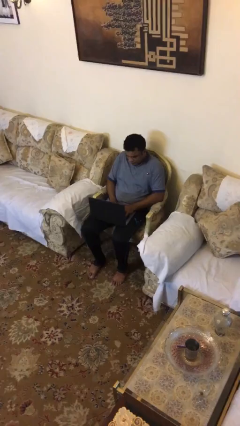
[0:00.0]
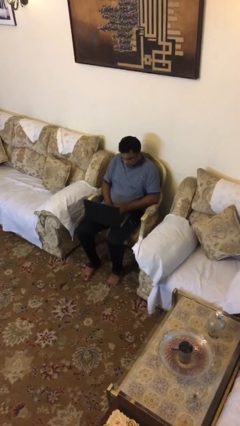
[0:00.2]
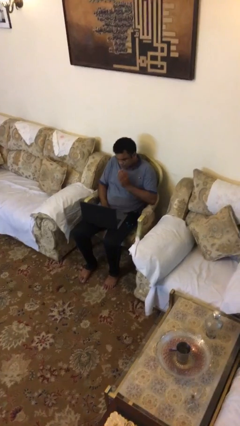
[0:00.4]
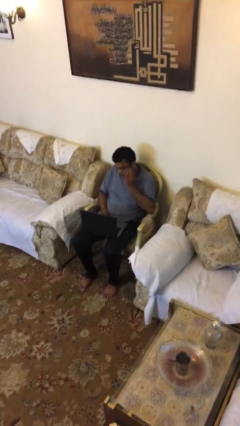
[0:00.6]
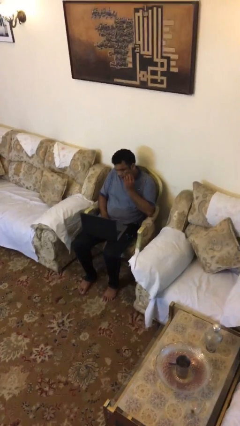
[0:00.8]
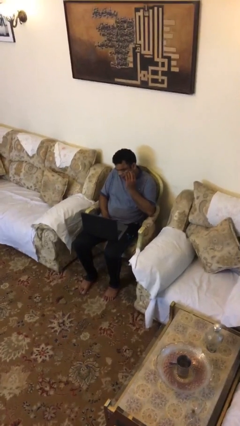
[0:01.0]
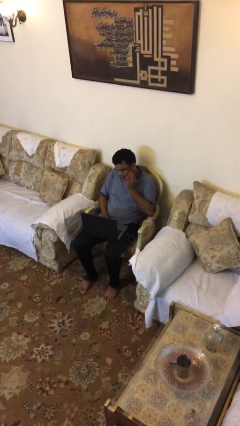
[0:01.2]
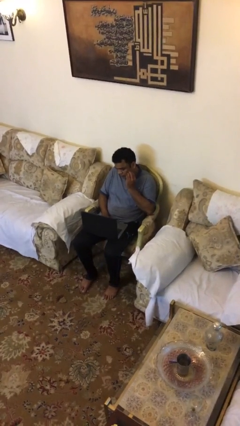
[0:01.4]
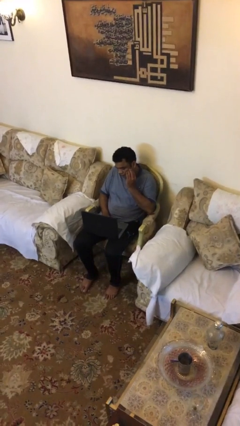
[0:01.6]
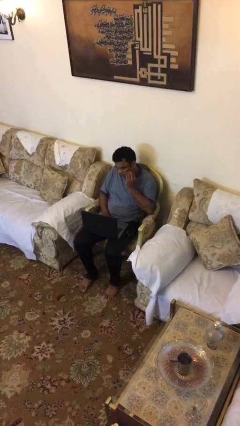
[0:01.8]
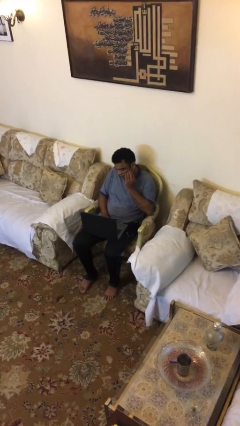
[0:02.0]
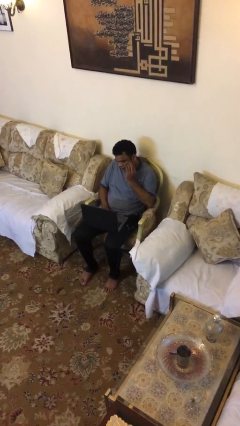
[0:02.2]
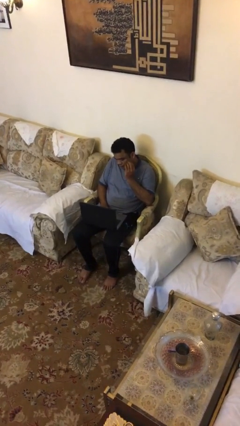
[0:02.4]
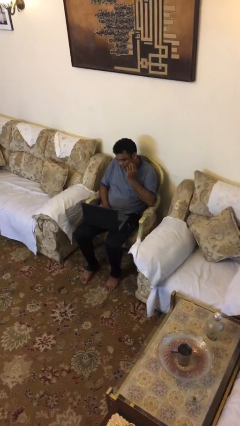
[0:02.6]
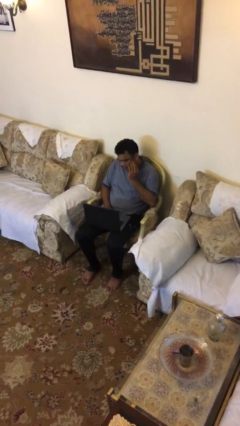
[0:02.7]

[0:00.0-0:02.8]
person interacts with laptop

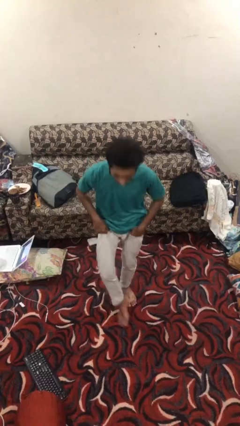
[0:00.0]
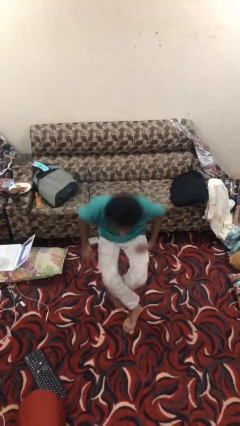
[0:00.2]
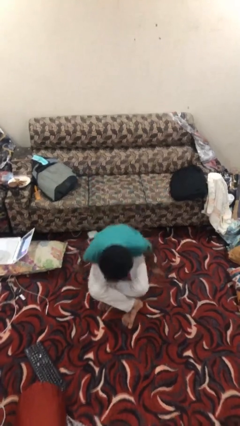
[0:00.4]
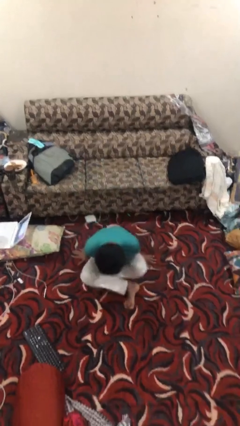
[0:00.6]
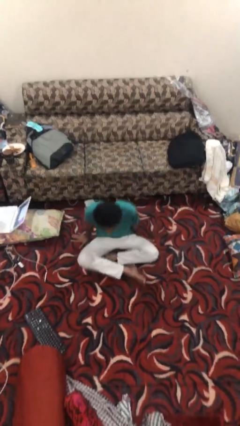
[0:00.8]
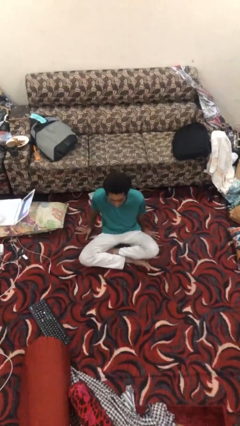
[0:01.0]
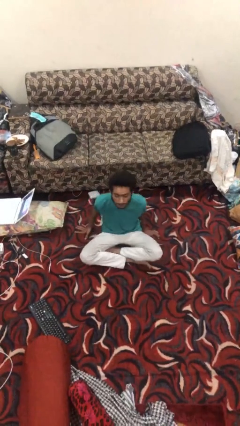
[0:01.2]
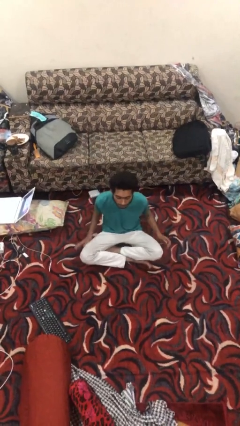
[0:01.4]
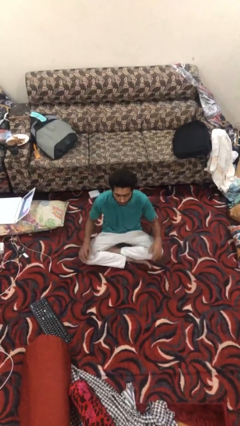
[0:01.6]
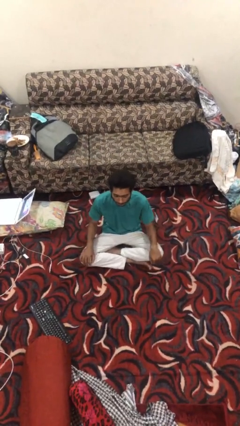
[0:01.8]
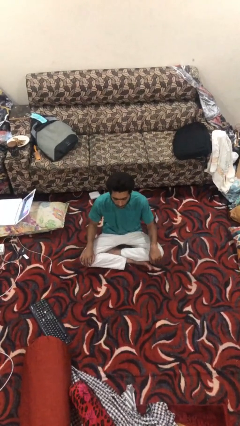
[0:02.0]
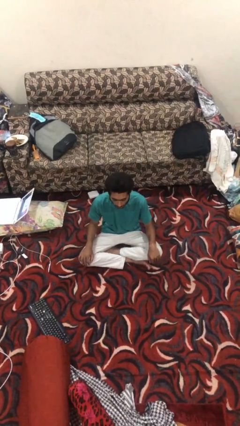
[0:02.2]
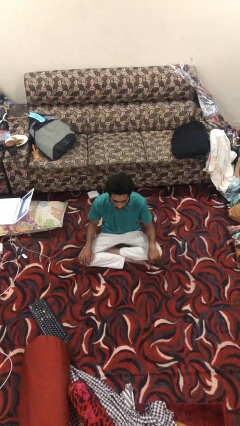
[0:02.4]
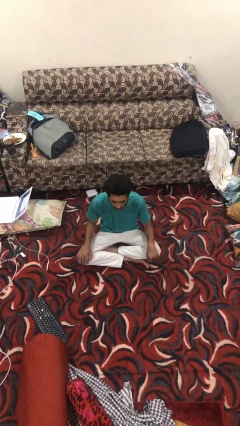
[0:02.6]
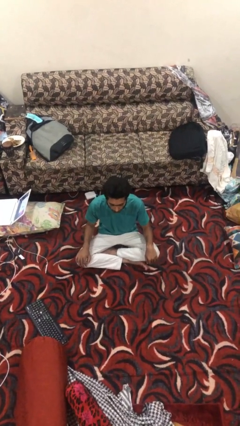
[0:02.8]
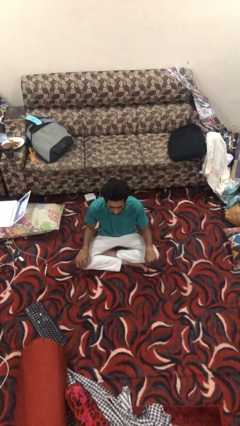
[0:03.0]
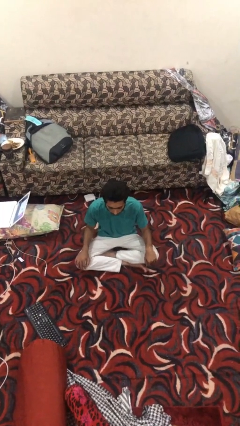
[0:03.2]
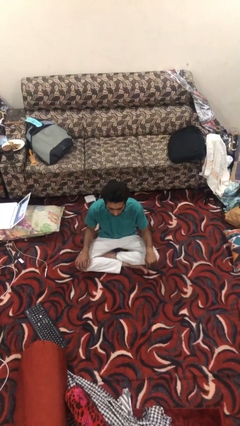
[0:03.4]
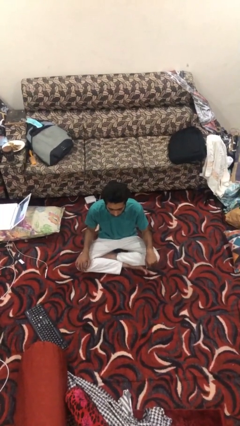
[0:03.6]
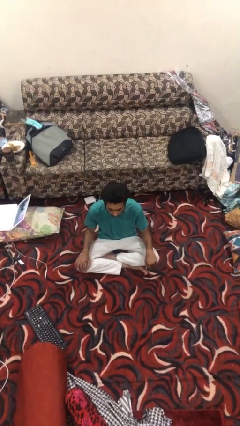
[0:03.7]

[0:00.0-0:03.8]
person sits crisscross

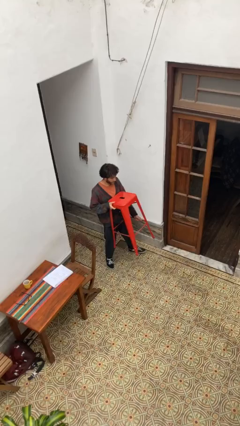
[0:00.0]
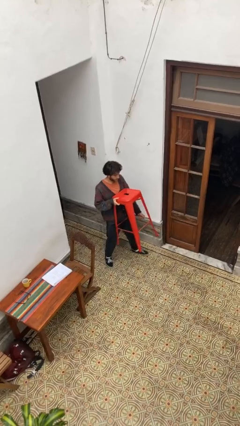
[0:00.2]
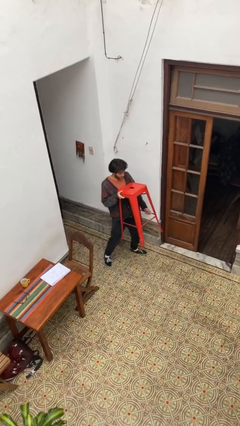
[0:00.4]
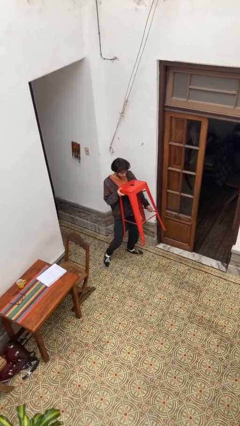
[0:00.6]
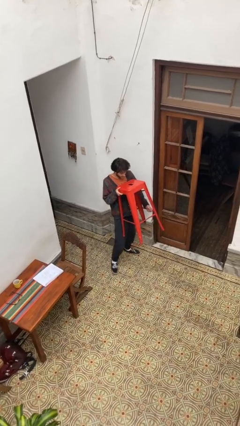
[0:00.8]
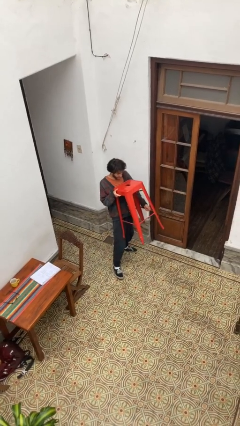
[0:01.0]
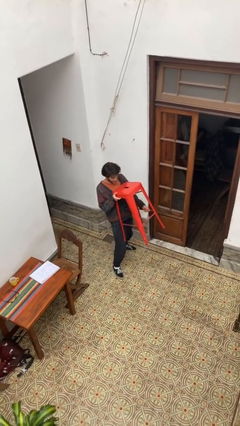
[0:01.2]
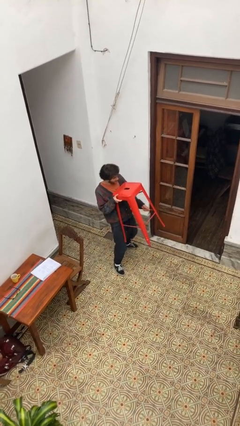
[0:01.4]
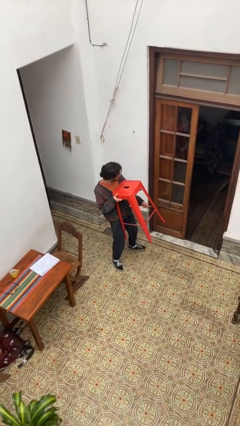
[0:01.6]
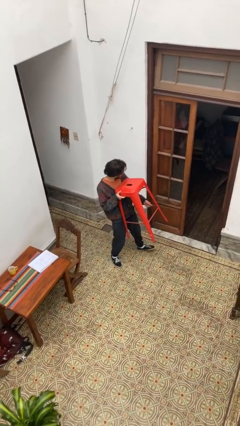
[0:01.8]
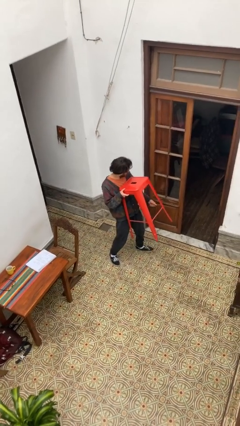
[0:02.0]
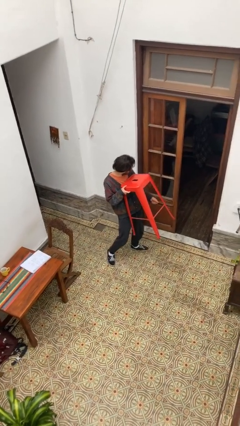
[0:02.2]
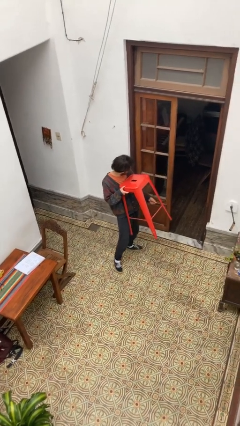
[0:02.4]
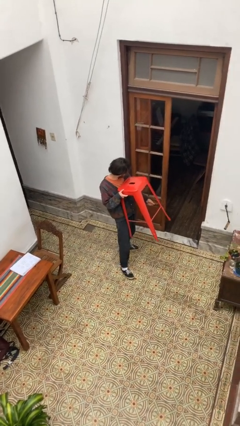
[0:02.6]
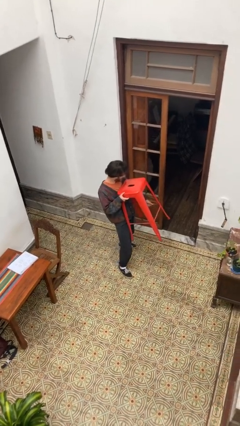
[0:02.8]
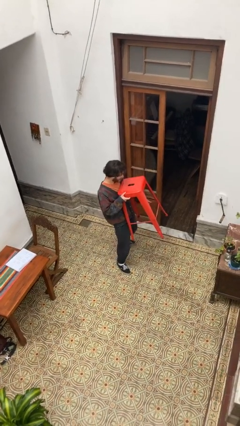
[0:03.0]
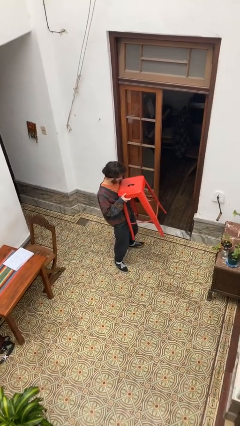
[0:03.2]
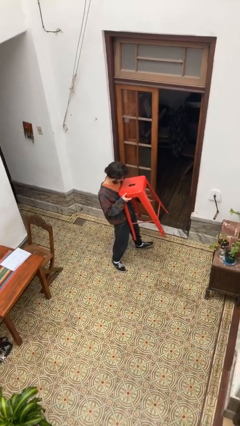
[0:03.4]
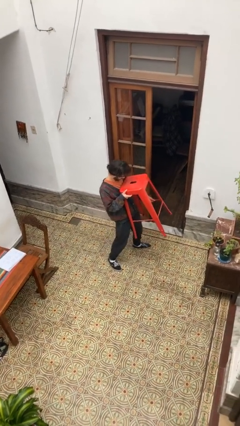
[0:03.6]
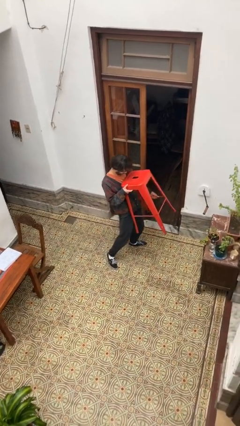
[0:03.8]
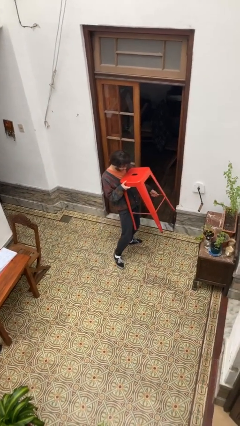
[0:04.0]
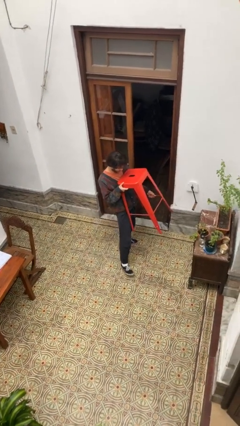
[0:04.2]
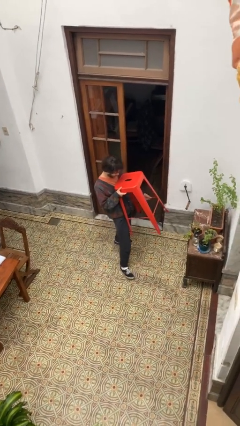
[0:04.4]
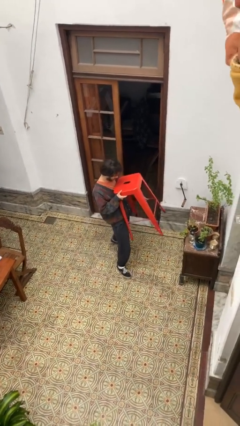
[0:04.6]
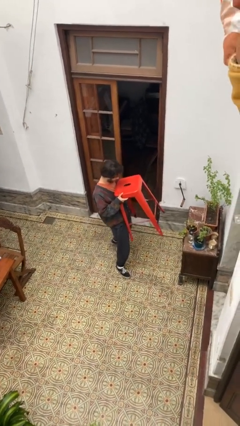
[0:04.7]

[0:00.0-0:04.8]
person carries heavy object

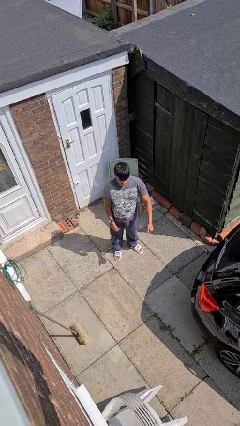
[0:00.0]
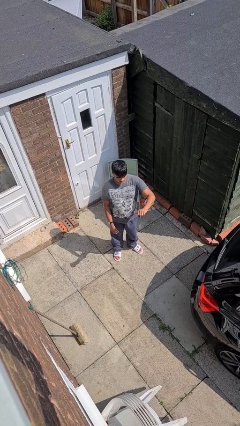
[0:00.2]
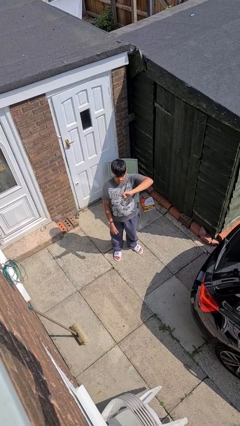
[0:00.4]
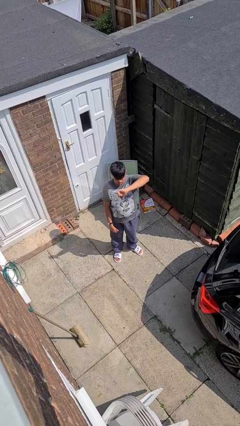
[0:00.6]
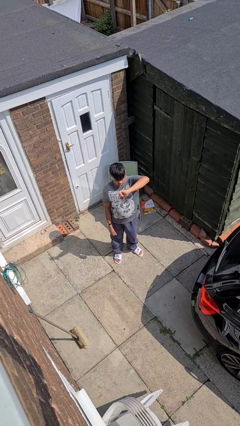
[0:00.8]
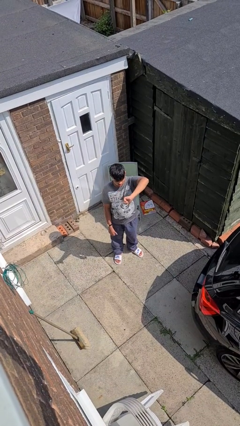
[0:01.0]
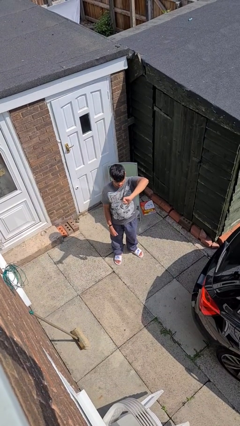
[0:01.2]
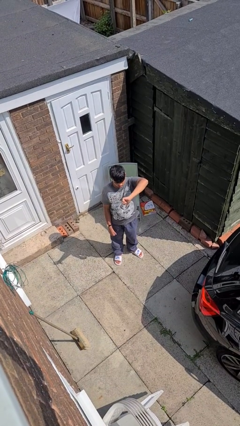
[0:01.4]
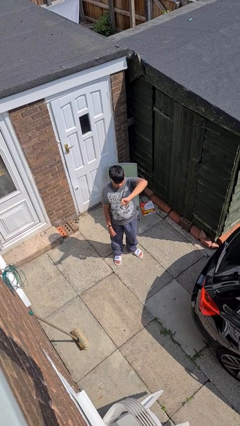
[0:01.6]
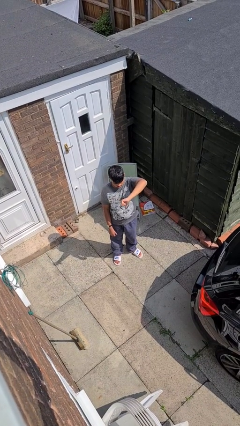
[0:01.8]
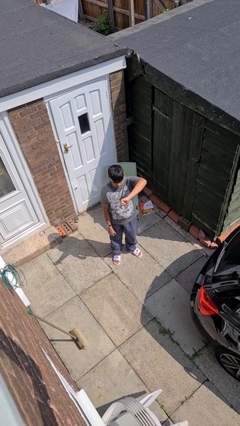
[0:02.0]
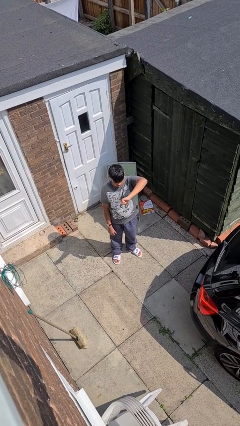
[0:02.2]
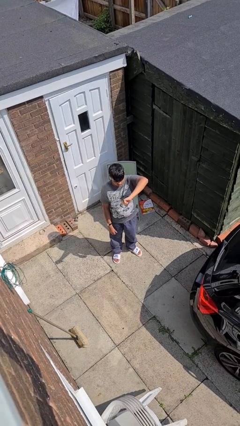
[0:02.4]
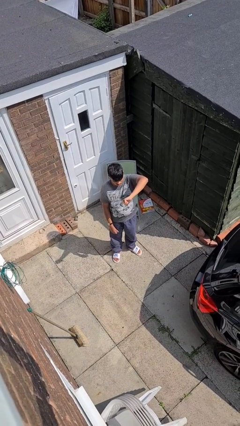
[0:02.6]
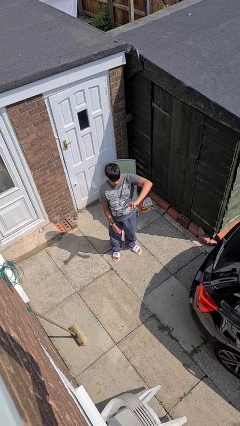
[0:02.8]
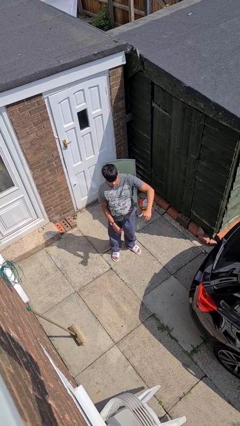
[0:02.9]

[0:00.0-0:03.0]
person gestures thumbs down

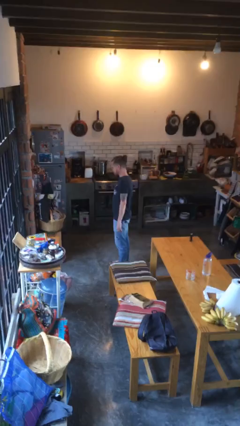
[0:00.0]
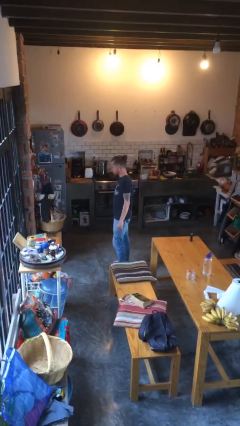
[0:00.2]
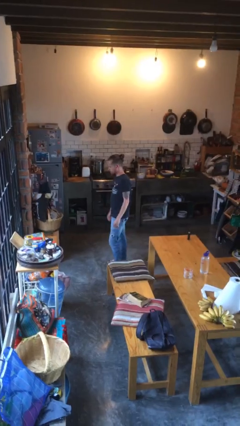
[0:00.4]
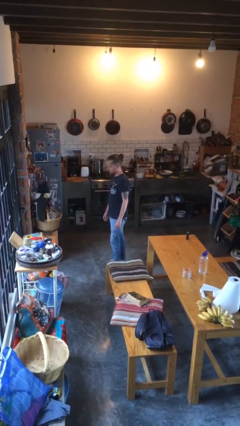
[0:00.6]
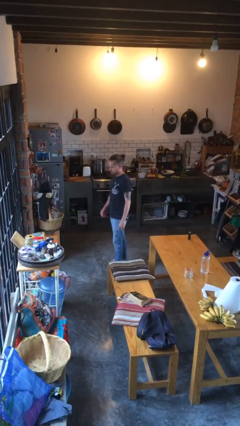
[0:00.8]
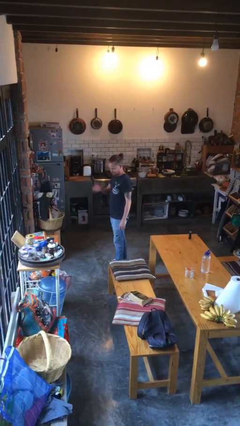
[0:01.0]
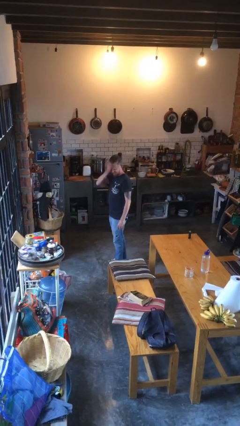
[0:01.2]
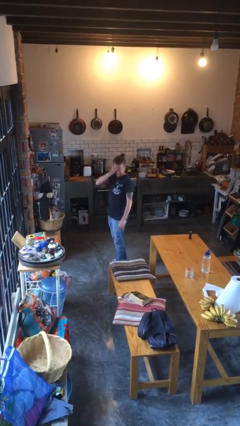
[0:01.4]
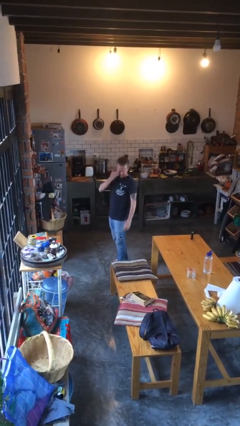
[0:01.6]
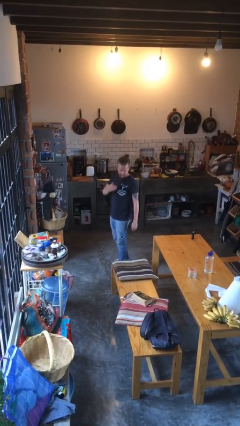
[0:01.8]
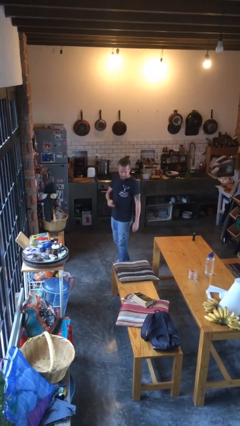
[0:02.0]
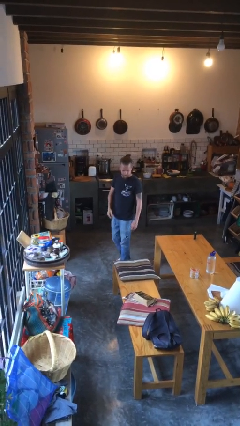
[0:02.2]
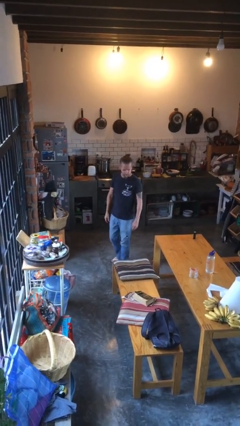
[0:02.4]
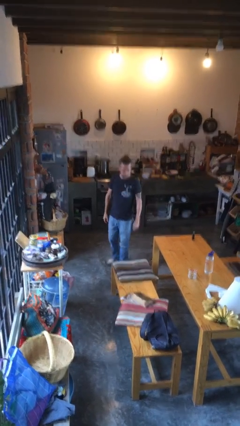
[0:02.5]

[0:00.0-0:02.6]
person swats bug

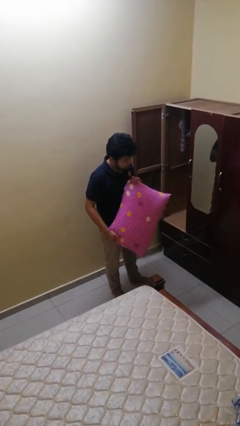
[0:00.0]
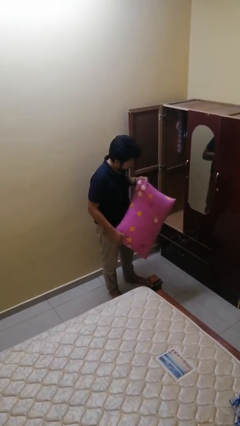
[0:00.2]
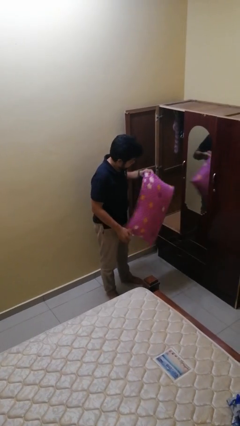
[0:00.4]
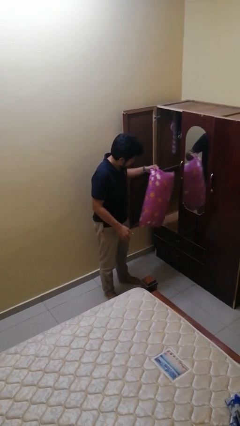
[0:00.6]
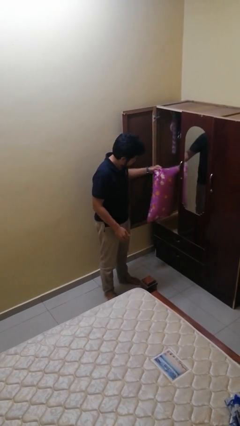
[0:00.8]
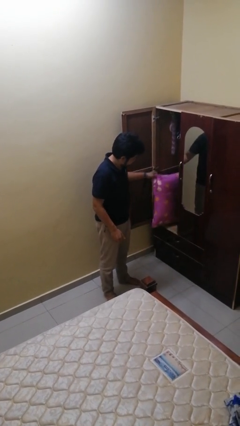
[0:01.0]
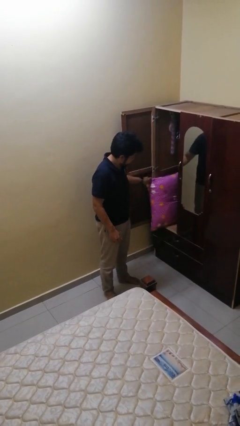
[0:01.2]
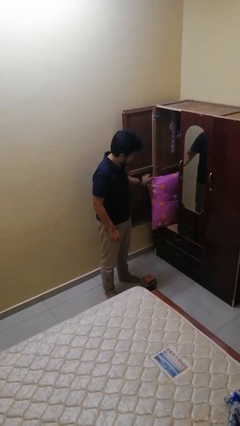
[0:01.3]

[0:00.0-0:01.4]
person puts down object into cabinet
